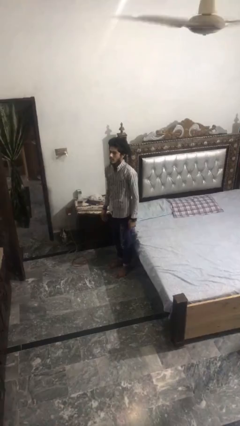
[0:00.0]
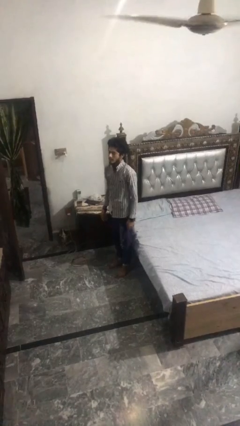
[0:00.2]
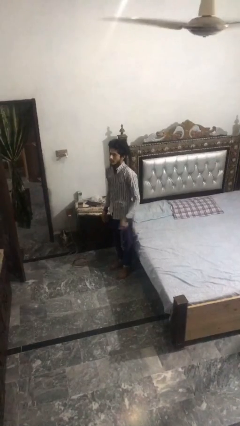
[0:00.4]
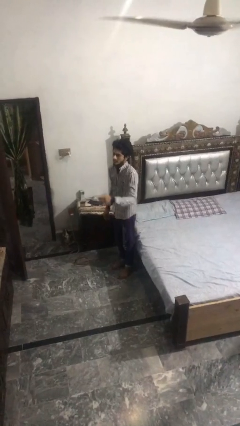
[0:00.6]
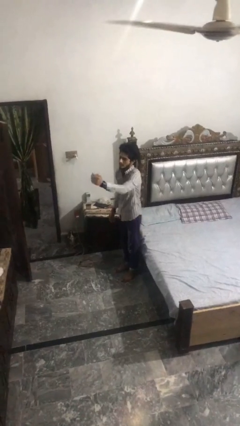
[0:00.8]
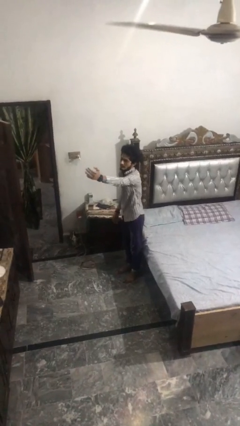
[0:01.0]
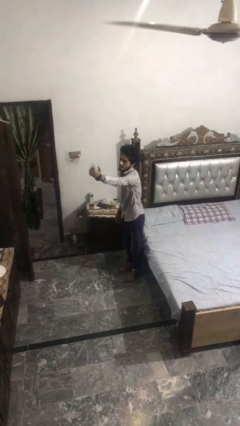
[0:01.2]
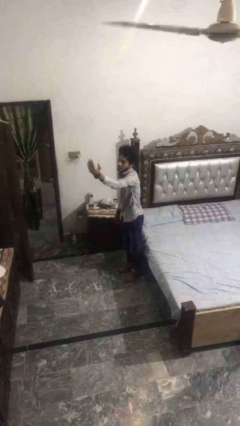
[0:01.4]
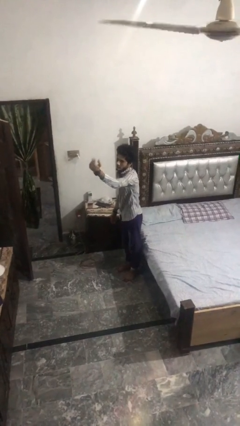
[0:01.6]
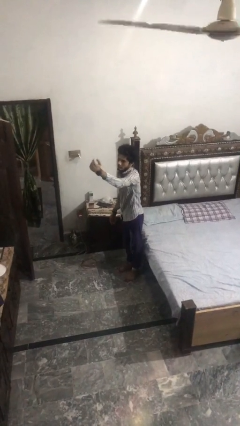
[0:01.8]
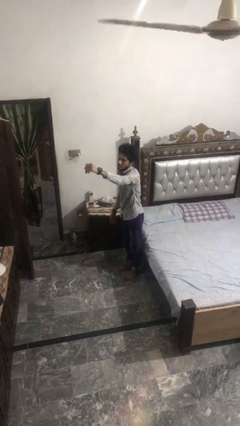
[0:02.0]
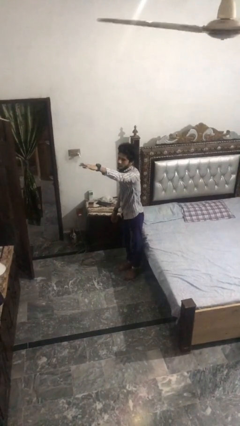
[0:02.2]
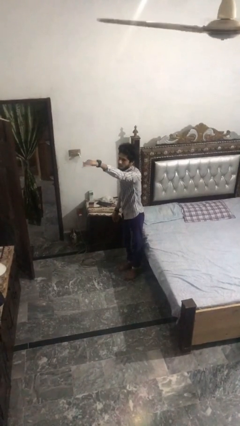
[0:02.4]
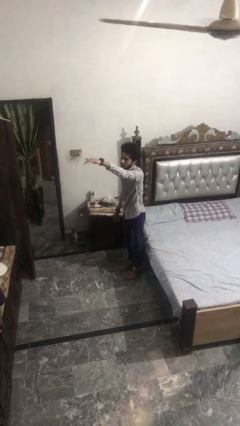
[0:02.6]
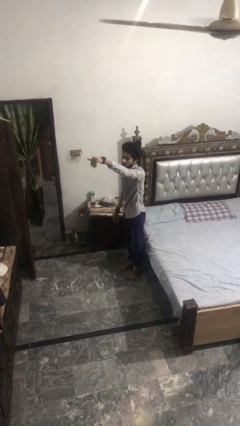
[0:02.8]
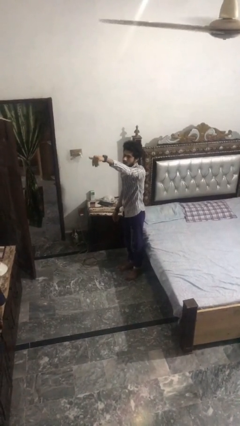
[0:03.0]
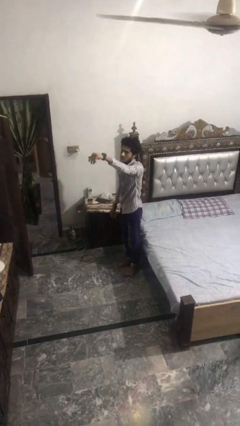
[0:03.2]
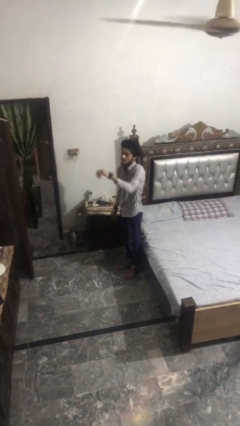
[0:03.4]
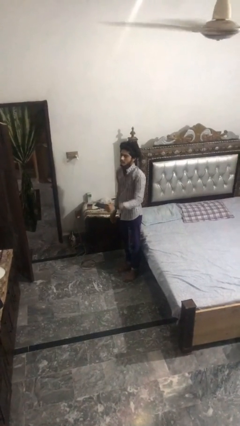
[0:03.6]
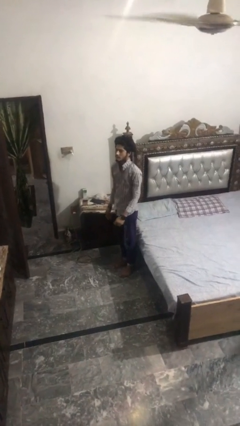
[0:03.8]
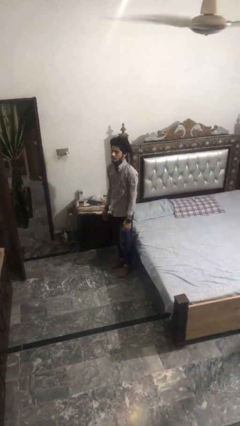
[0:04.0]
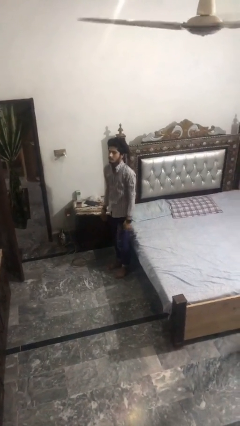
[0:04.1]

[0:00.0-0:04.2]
person gestures come here

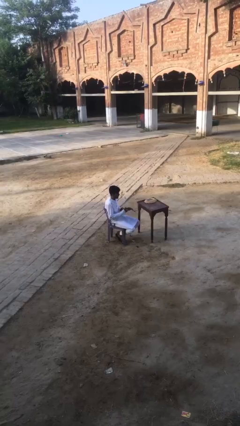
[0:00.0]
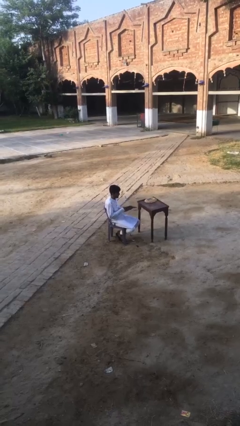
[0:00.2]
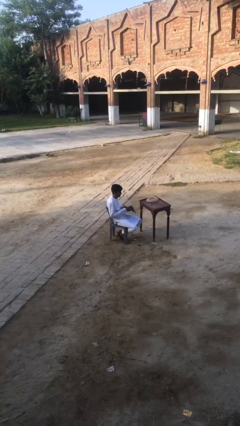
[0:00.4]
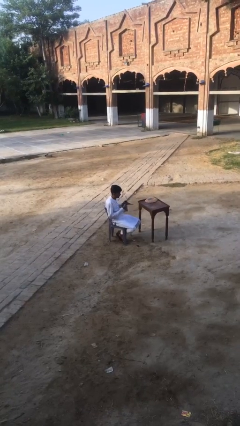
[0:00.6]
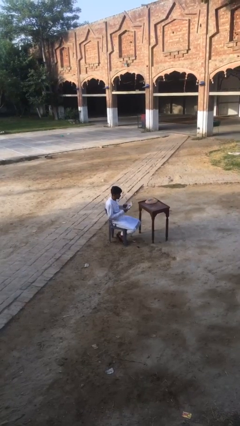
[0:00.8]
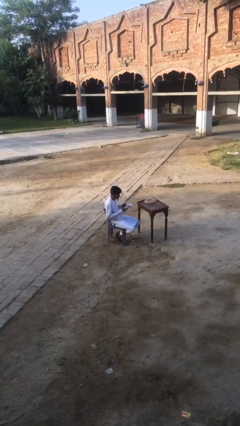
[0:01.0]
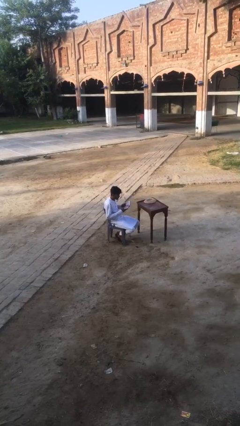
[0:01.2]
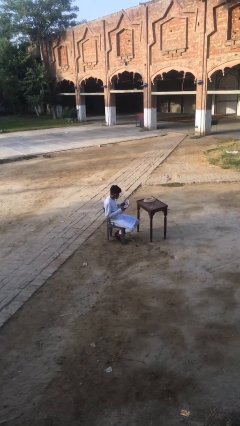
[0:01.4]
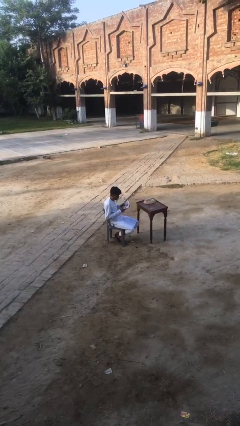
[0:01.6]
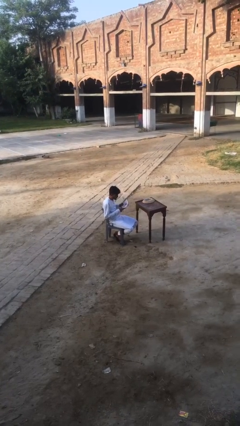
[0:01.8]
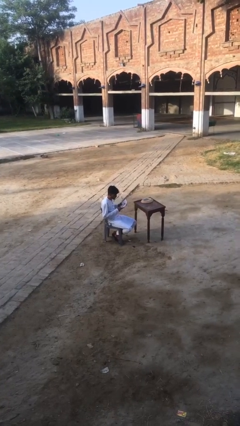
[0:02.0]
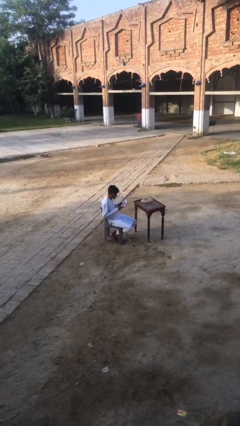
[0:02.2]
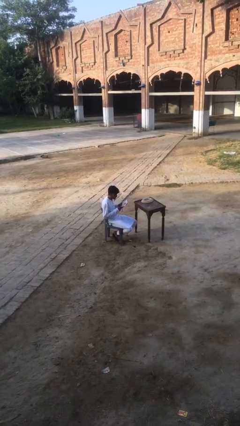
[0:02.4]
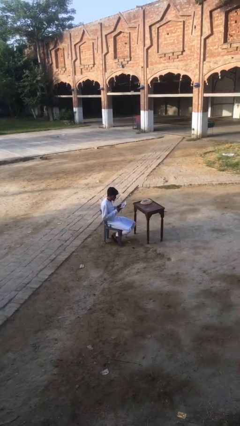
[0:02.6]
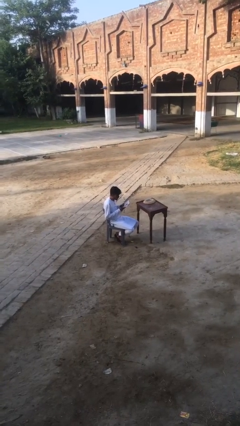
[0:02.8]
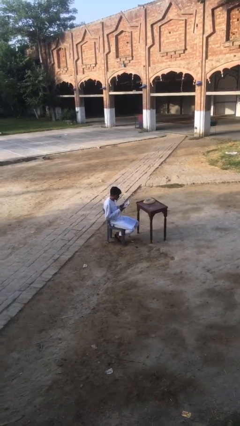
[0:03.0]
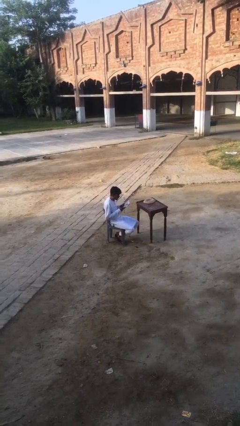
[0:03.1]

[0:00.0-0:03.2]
person reads document

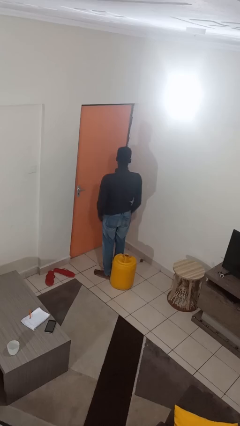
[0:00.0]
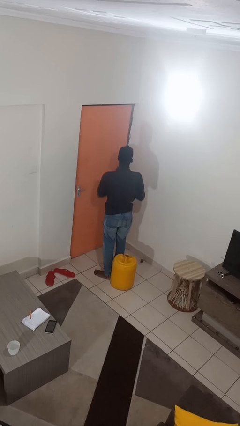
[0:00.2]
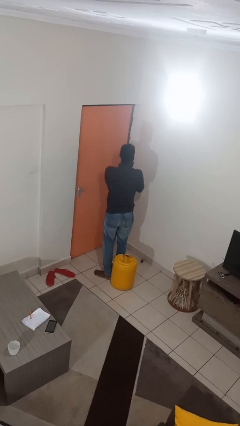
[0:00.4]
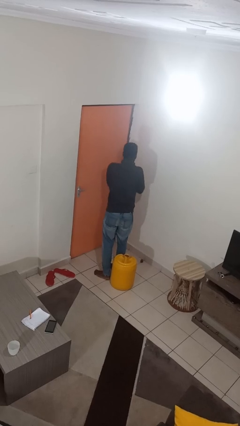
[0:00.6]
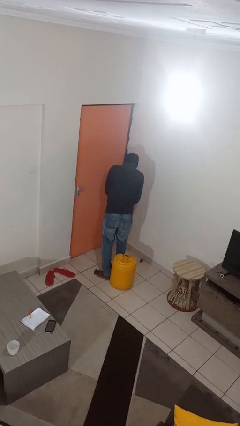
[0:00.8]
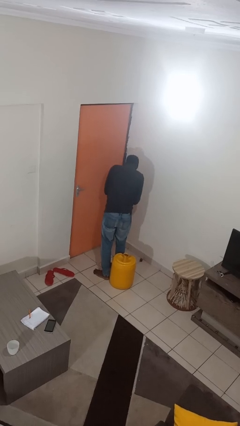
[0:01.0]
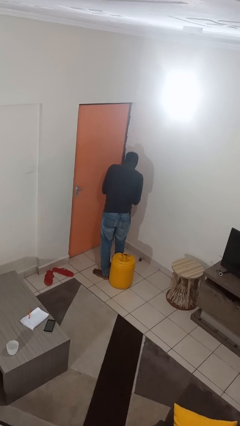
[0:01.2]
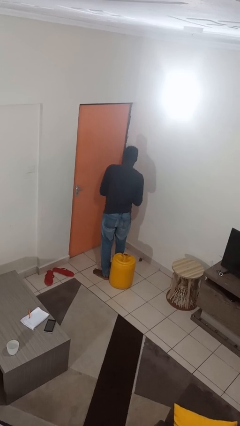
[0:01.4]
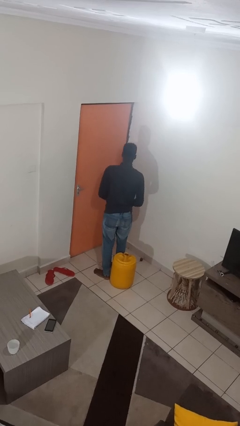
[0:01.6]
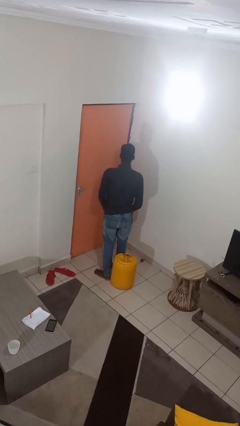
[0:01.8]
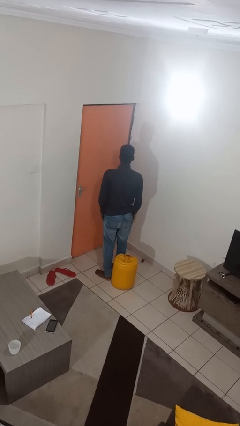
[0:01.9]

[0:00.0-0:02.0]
person sneezes into hand

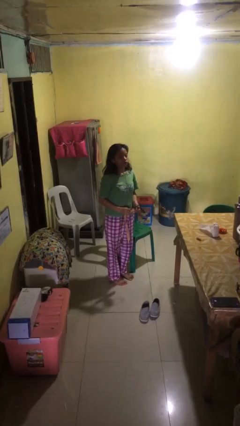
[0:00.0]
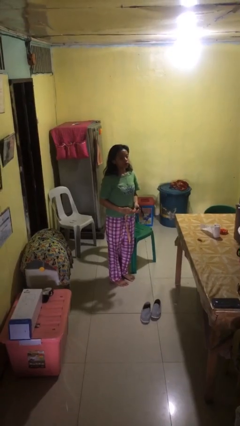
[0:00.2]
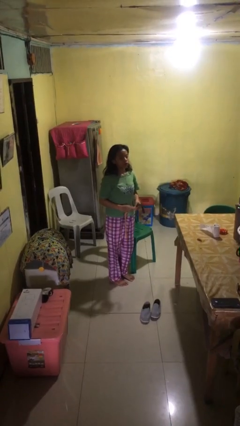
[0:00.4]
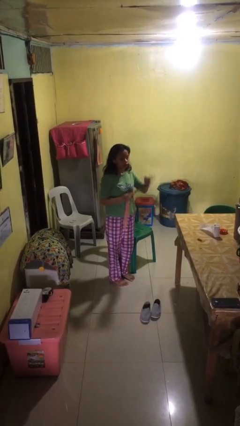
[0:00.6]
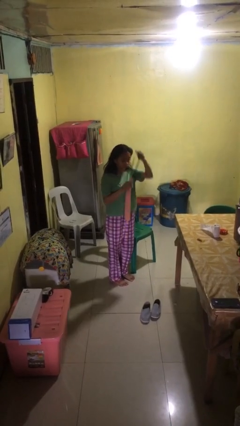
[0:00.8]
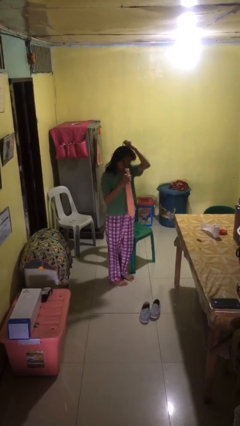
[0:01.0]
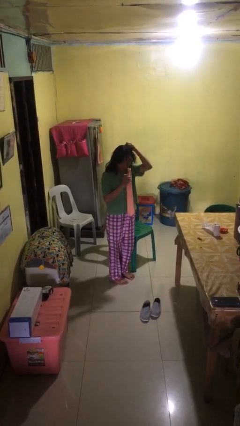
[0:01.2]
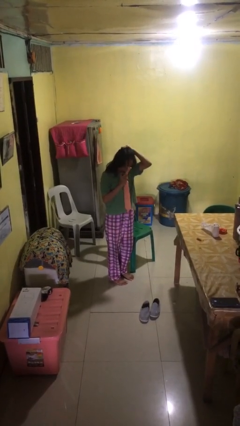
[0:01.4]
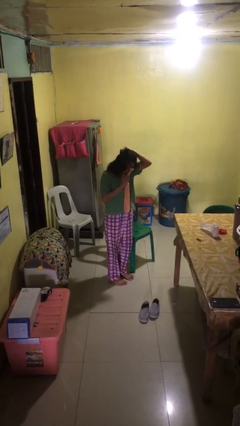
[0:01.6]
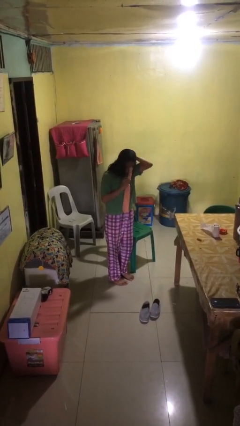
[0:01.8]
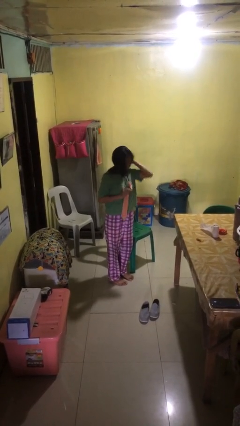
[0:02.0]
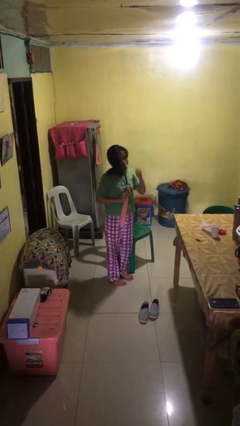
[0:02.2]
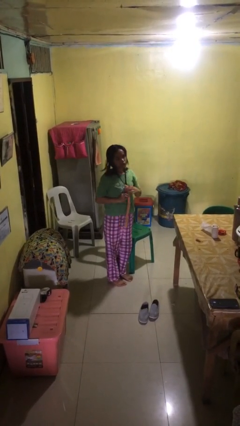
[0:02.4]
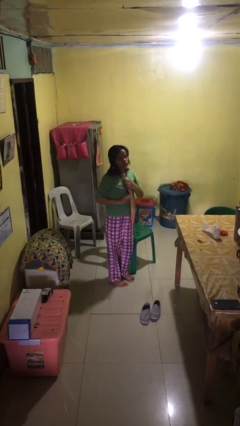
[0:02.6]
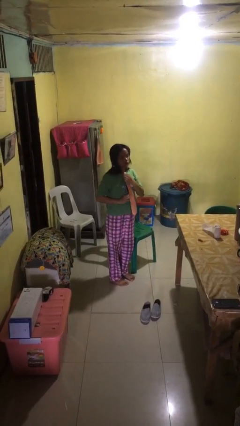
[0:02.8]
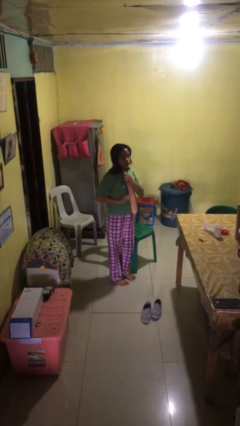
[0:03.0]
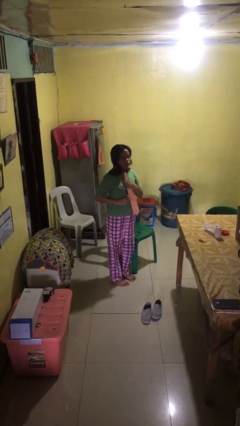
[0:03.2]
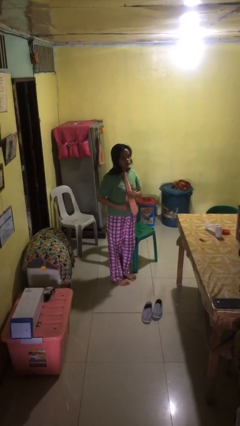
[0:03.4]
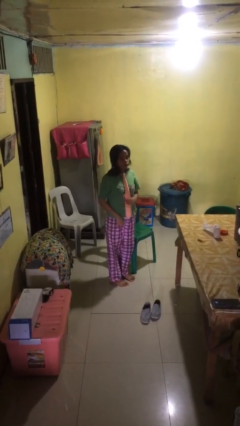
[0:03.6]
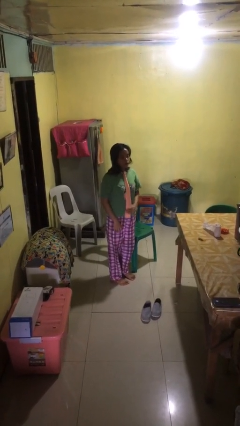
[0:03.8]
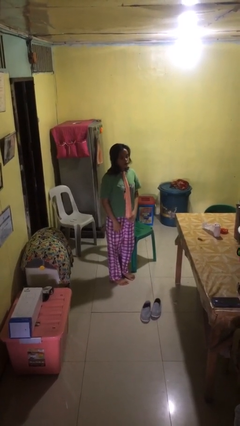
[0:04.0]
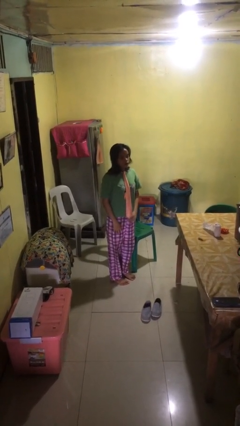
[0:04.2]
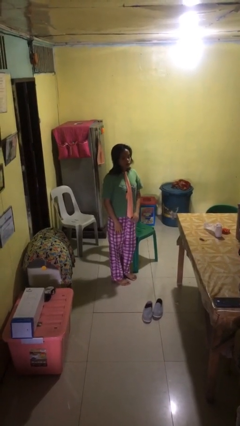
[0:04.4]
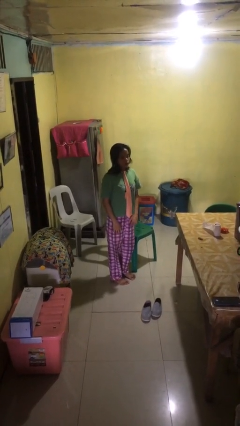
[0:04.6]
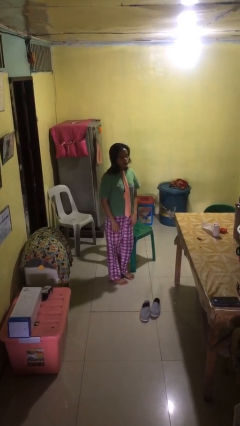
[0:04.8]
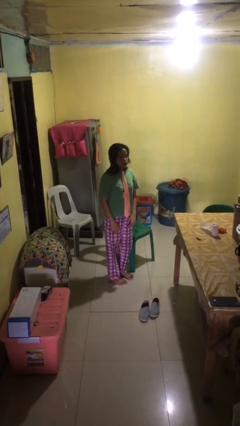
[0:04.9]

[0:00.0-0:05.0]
person puts on necktie

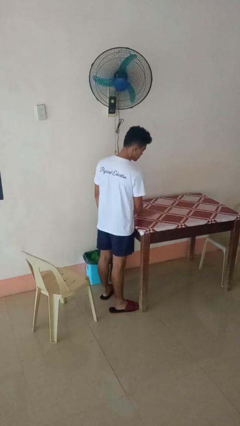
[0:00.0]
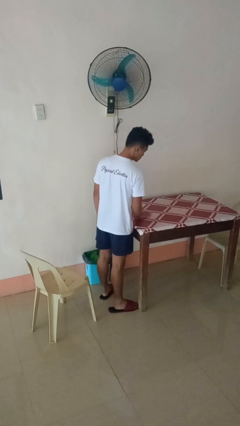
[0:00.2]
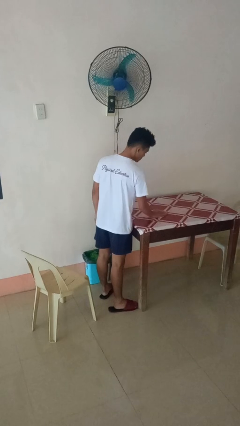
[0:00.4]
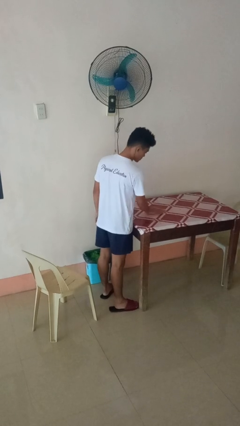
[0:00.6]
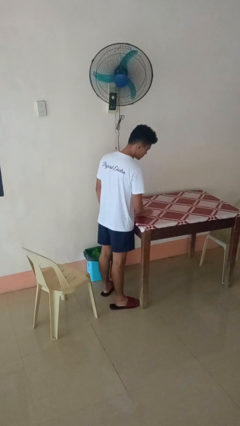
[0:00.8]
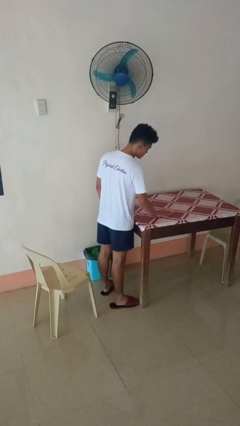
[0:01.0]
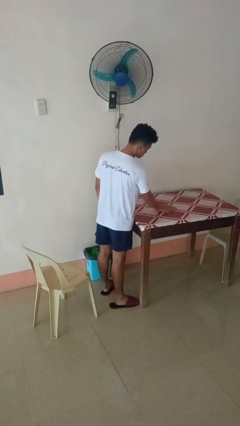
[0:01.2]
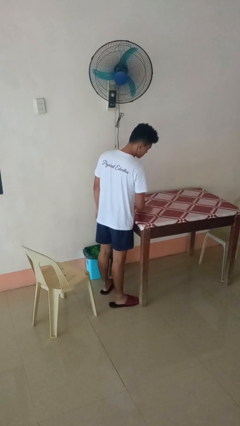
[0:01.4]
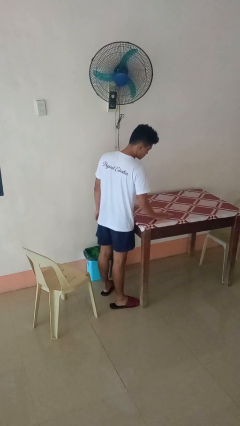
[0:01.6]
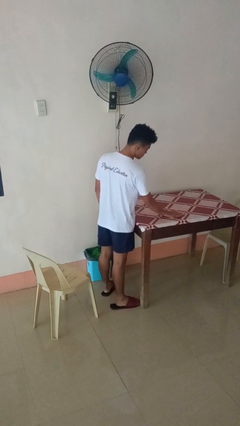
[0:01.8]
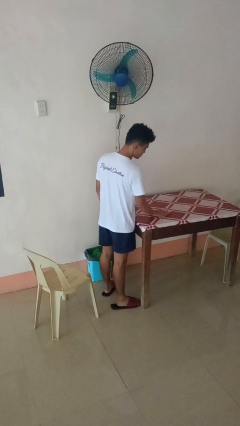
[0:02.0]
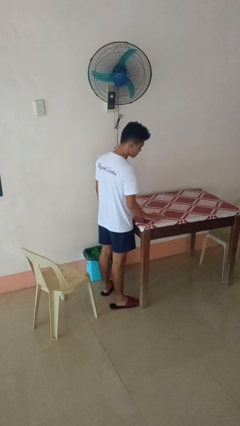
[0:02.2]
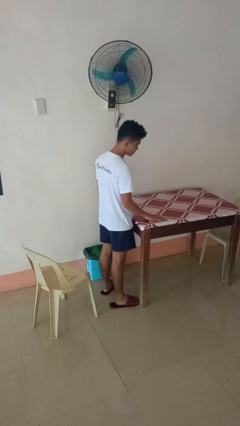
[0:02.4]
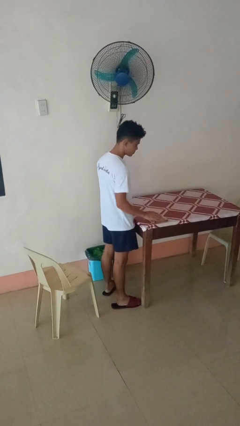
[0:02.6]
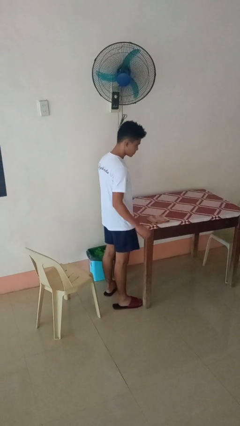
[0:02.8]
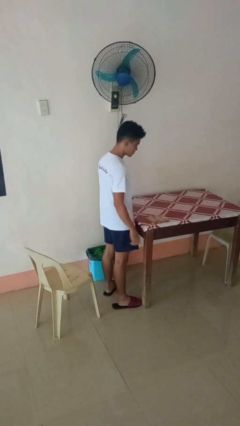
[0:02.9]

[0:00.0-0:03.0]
person cleans table with rag
